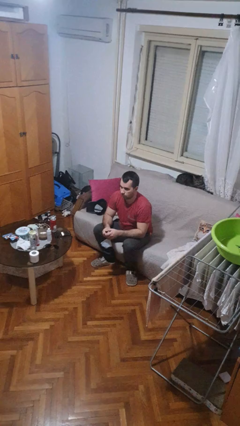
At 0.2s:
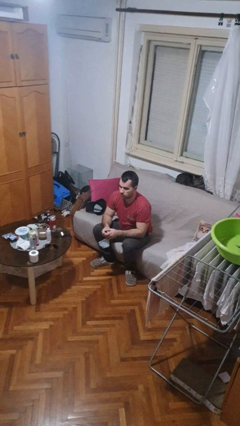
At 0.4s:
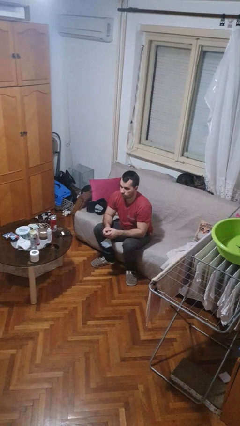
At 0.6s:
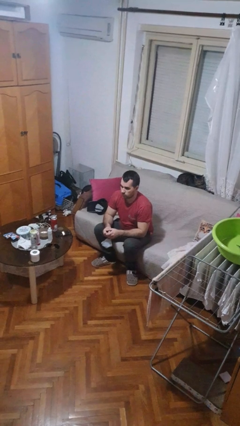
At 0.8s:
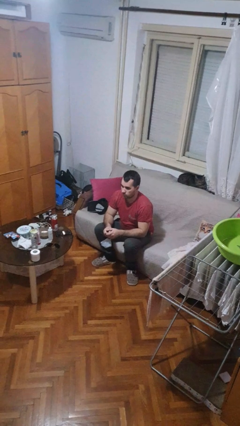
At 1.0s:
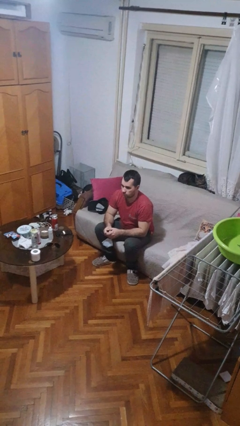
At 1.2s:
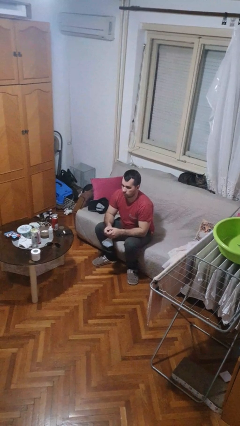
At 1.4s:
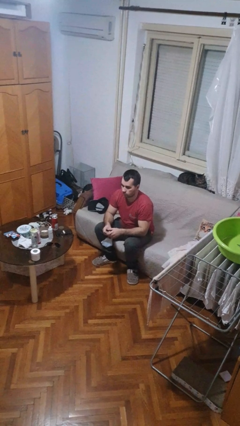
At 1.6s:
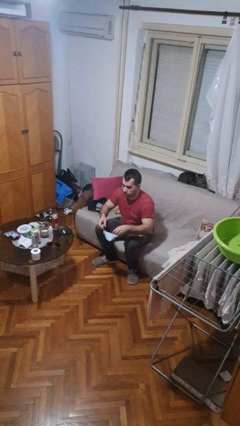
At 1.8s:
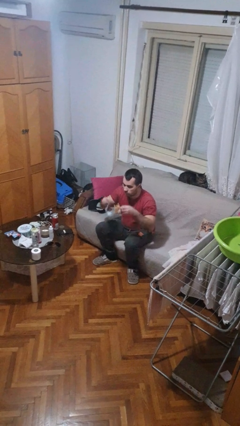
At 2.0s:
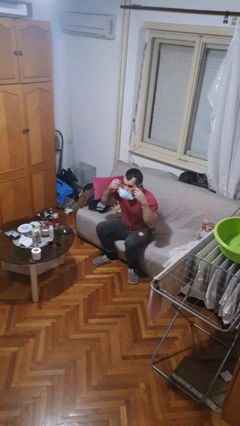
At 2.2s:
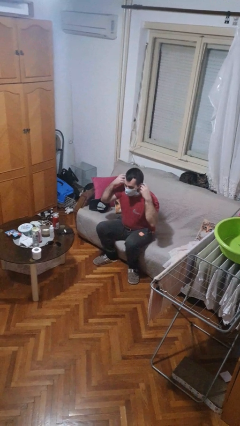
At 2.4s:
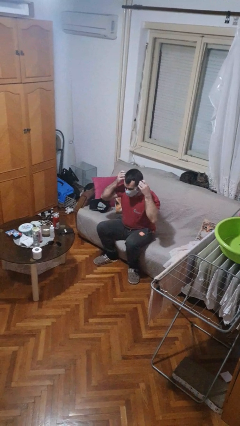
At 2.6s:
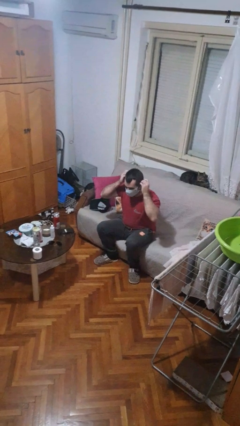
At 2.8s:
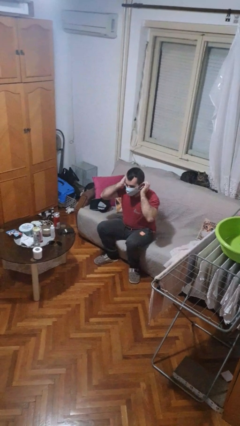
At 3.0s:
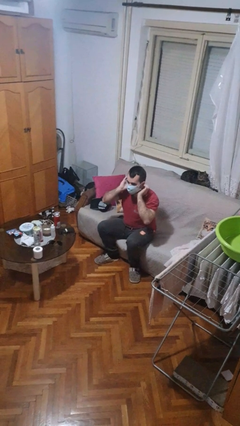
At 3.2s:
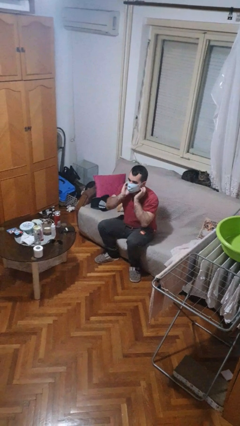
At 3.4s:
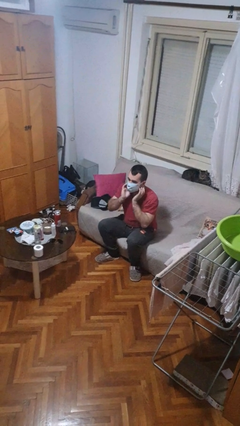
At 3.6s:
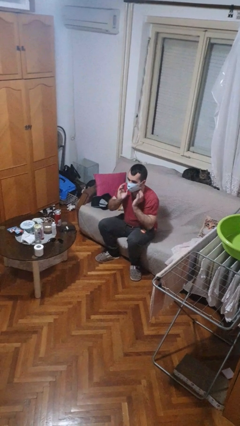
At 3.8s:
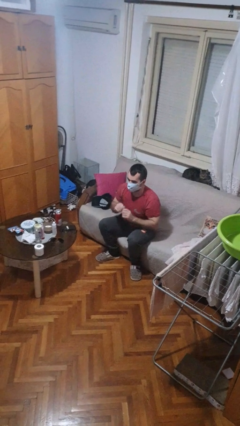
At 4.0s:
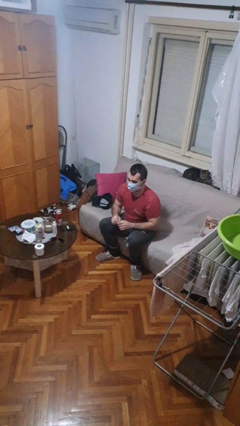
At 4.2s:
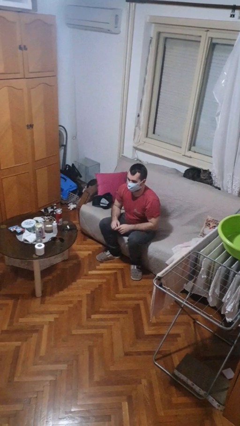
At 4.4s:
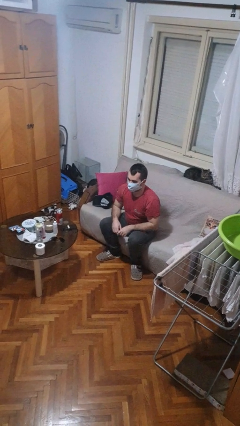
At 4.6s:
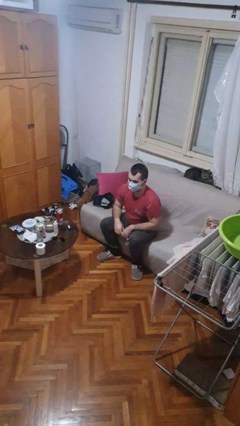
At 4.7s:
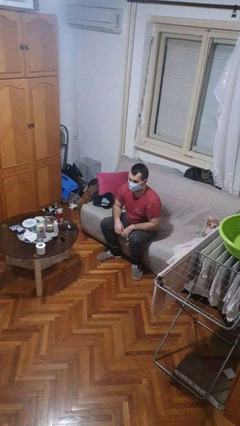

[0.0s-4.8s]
person puts on facemask

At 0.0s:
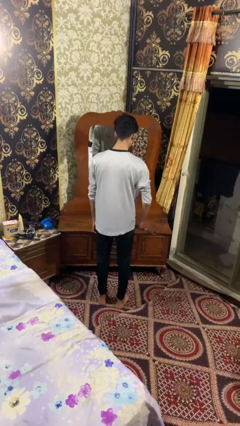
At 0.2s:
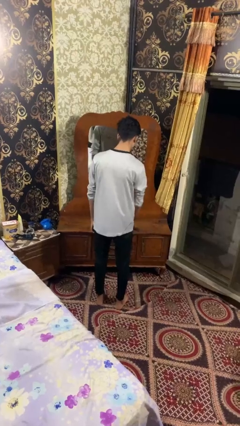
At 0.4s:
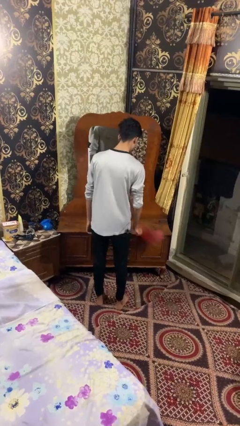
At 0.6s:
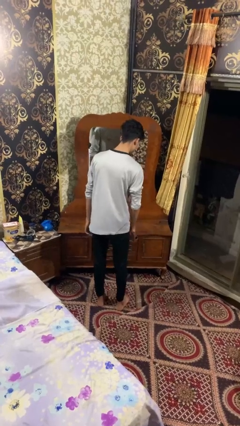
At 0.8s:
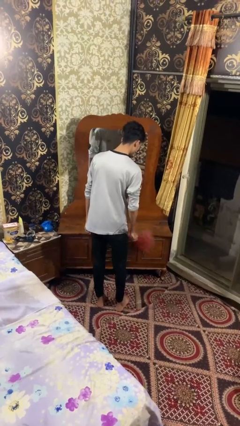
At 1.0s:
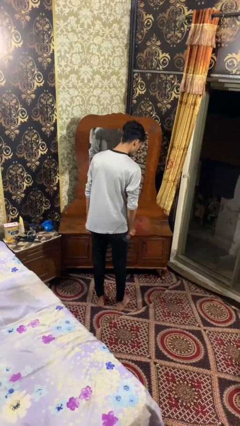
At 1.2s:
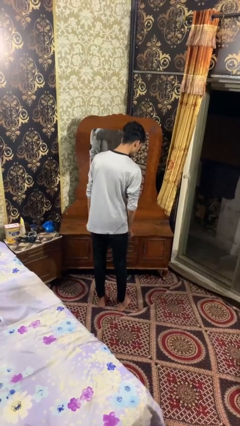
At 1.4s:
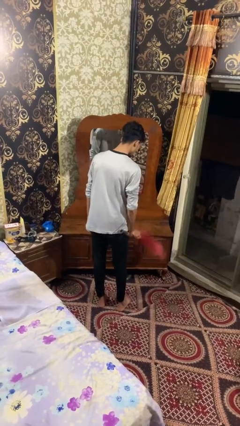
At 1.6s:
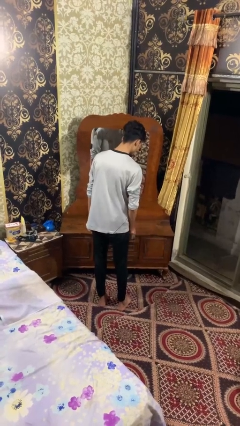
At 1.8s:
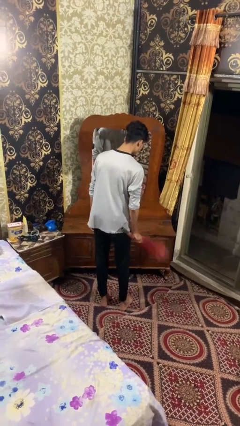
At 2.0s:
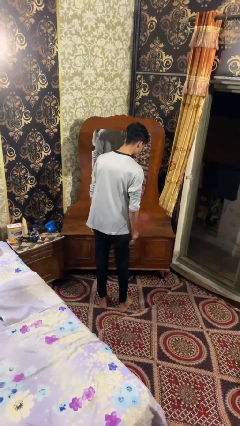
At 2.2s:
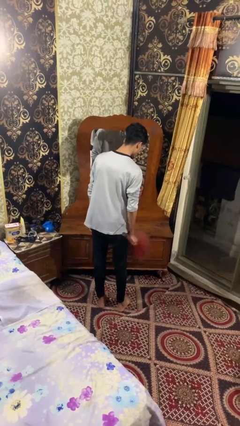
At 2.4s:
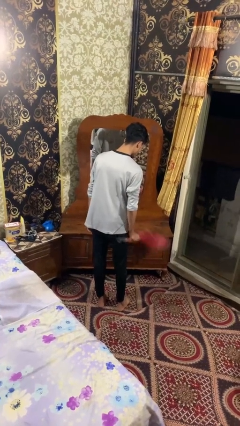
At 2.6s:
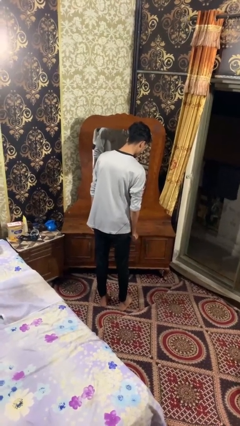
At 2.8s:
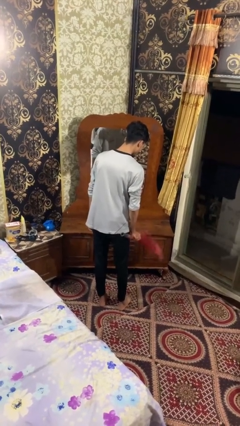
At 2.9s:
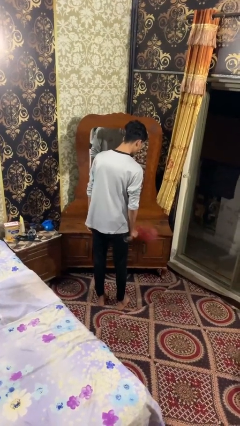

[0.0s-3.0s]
person dusts furniture

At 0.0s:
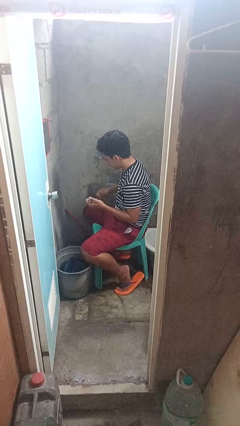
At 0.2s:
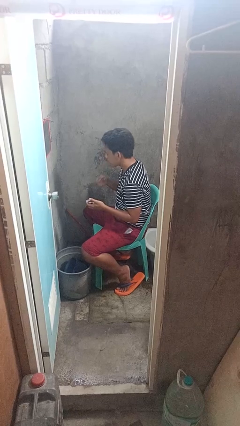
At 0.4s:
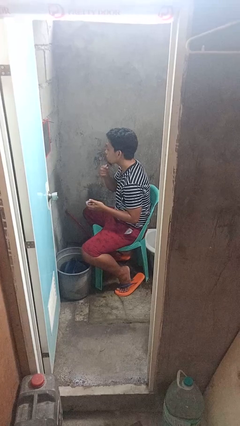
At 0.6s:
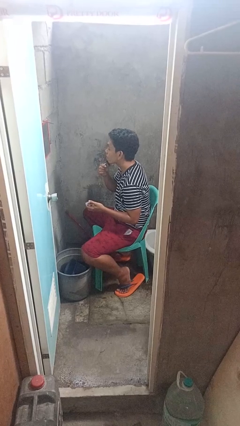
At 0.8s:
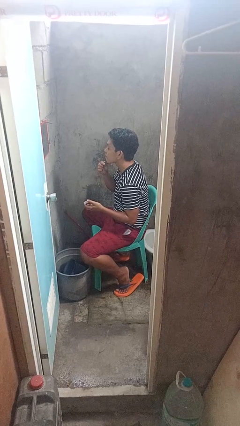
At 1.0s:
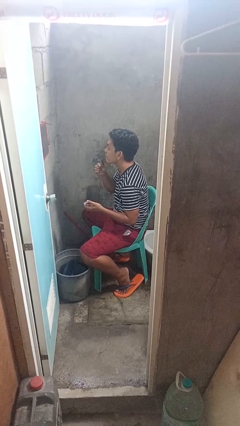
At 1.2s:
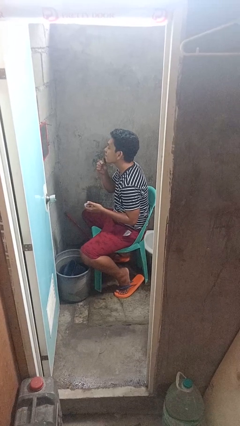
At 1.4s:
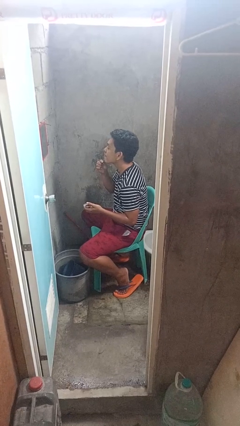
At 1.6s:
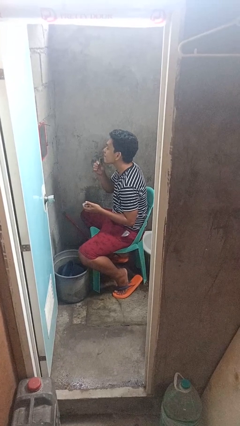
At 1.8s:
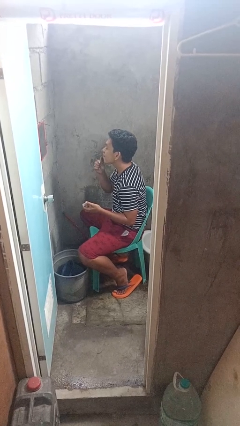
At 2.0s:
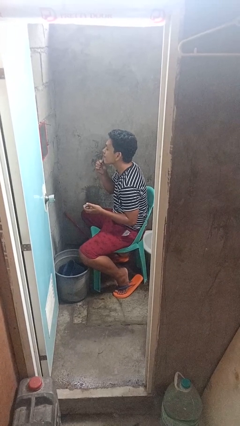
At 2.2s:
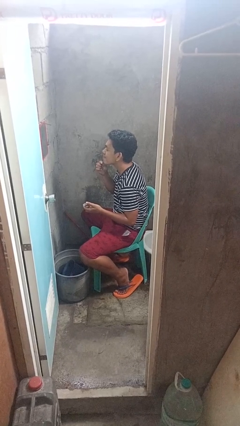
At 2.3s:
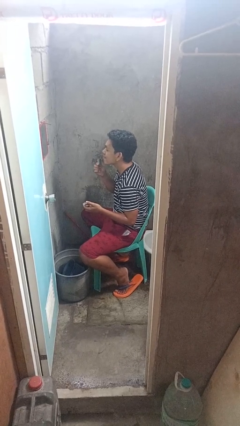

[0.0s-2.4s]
person shaves face

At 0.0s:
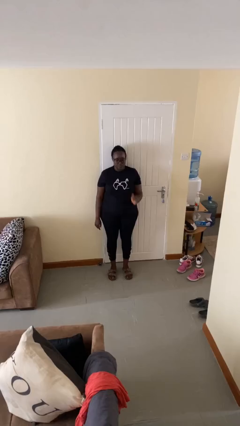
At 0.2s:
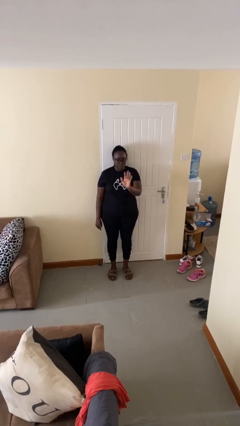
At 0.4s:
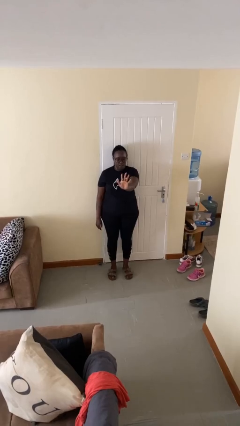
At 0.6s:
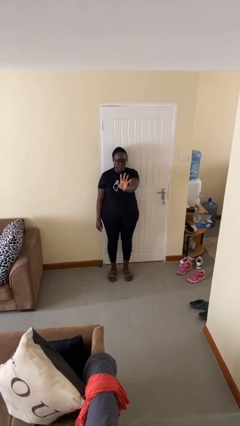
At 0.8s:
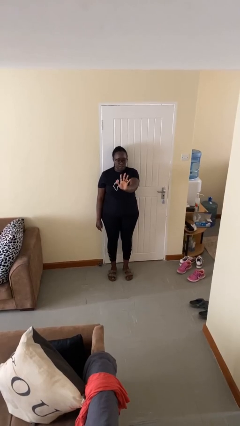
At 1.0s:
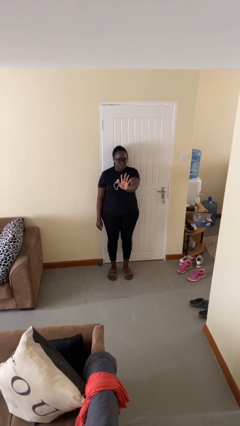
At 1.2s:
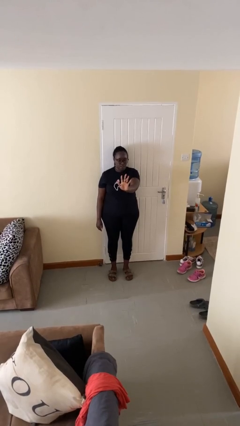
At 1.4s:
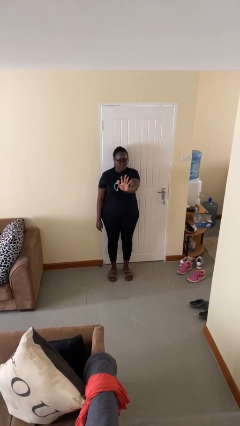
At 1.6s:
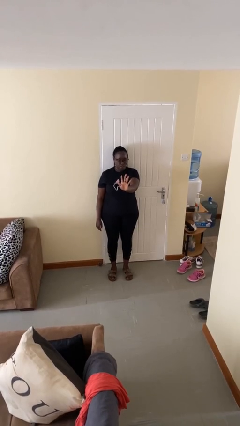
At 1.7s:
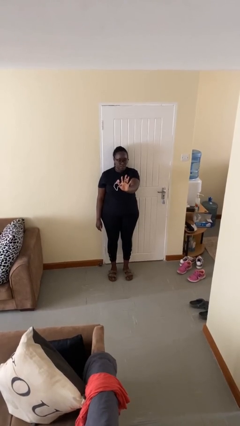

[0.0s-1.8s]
person gestures number five

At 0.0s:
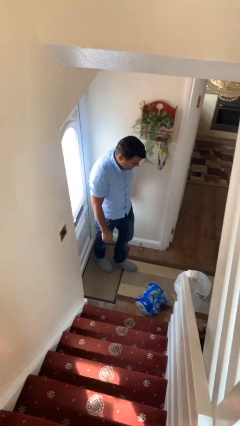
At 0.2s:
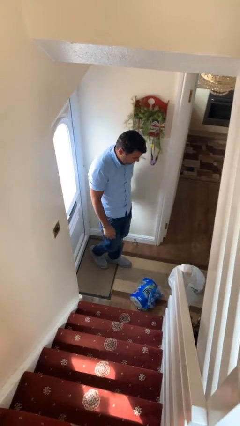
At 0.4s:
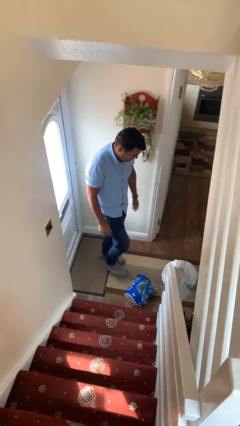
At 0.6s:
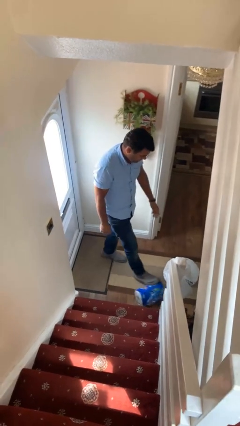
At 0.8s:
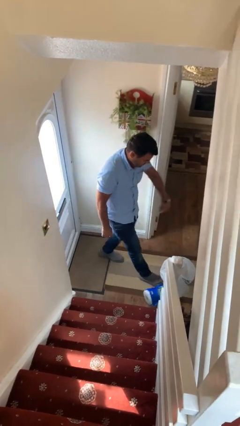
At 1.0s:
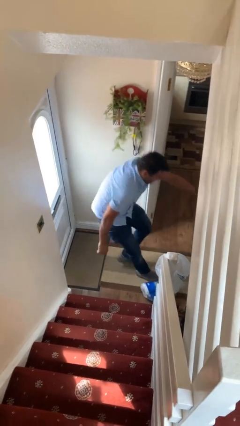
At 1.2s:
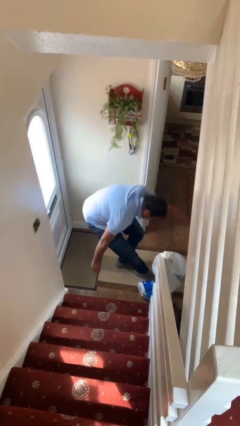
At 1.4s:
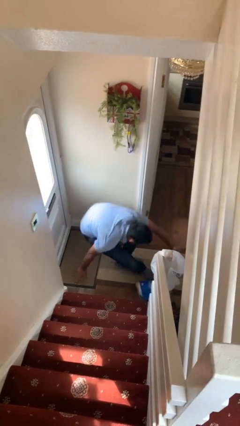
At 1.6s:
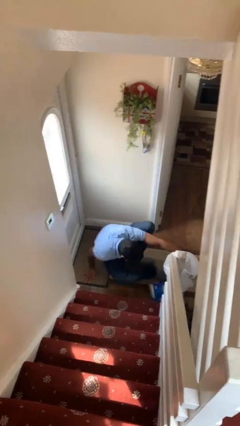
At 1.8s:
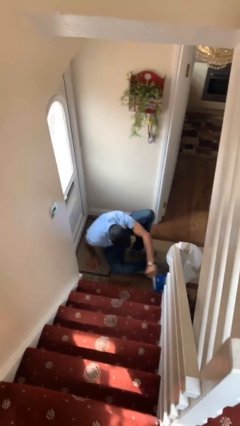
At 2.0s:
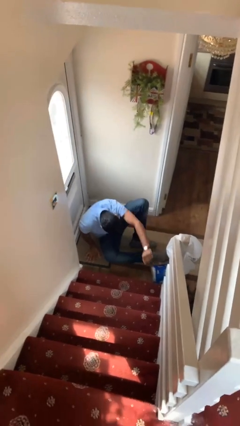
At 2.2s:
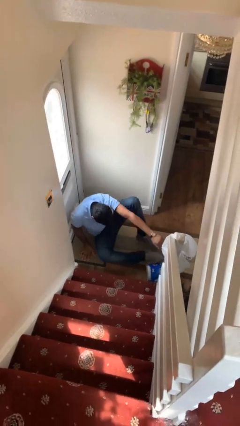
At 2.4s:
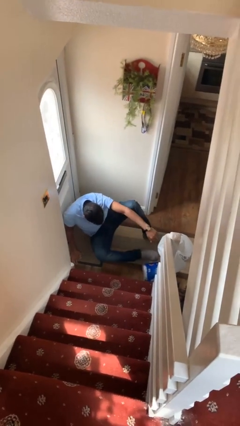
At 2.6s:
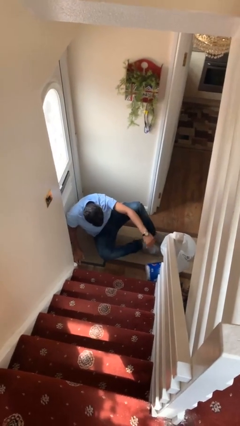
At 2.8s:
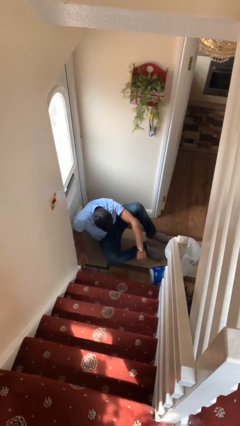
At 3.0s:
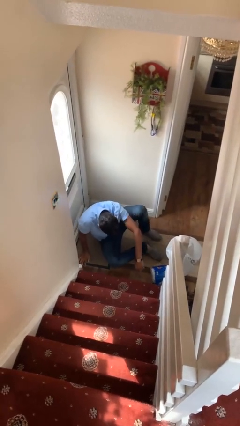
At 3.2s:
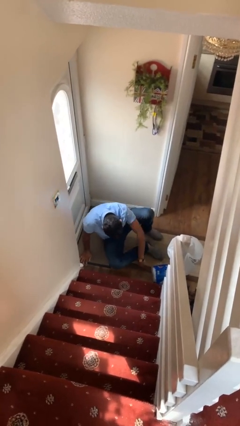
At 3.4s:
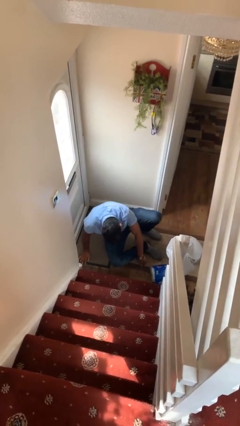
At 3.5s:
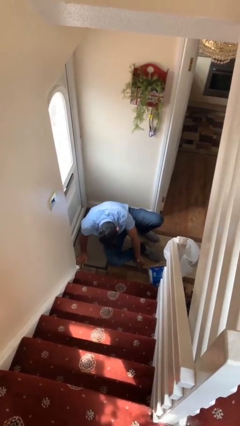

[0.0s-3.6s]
person trips on object on floor

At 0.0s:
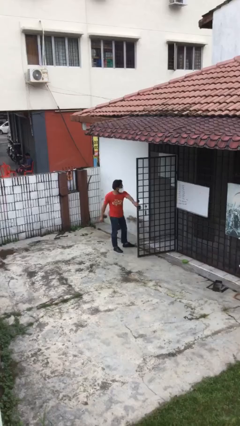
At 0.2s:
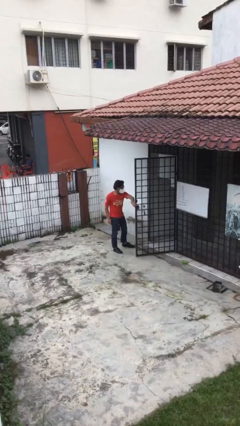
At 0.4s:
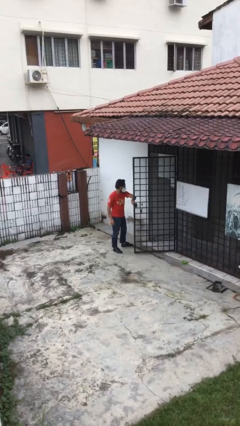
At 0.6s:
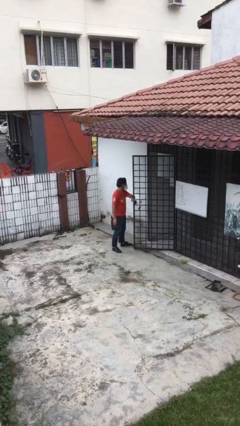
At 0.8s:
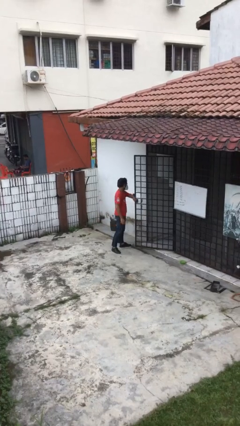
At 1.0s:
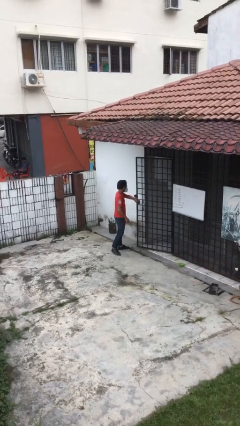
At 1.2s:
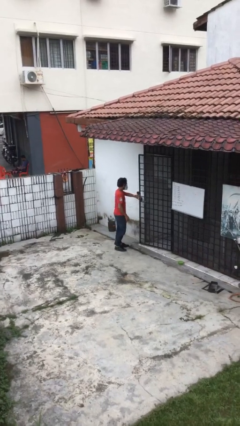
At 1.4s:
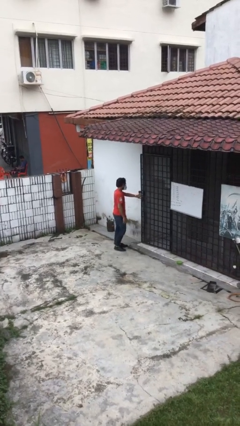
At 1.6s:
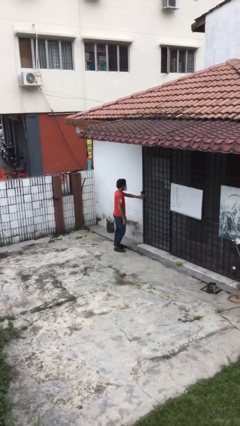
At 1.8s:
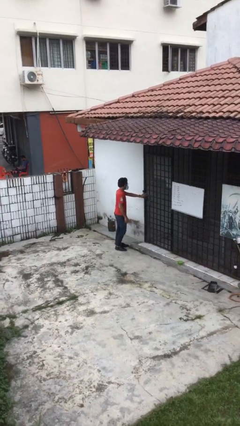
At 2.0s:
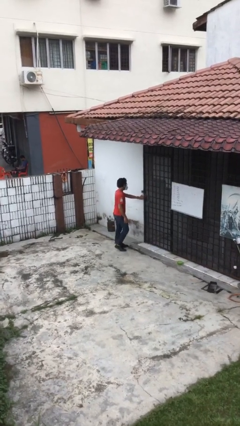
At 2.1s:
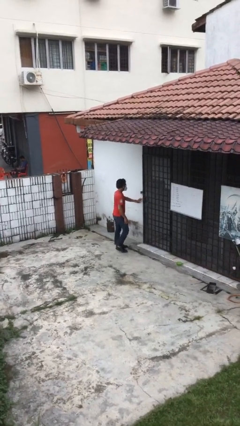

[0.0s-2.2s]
person closes facility door
